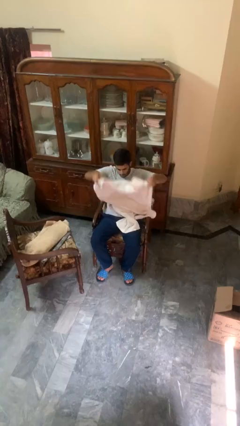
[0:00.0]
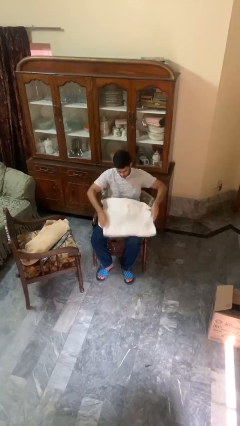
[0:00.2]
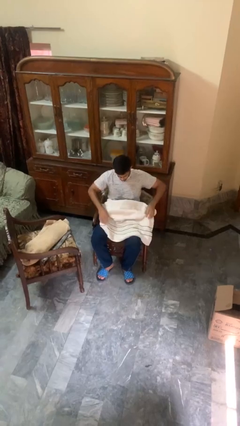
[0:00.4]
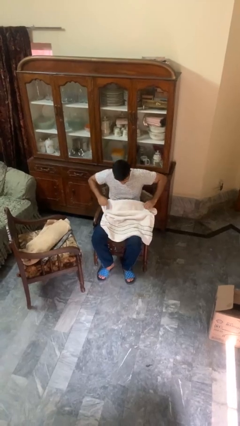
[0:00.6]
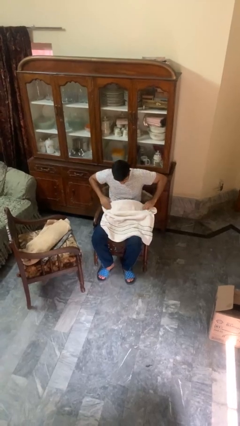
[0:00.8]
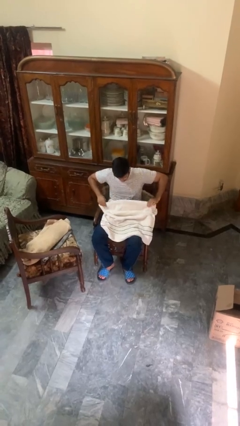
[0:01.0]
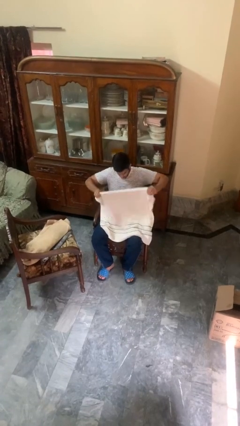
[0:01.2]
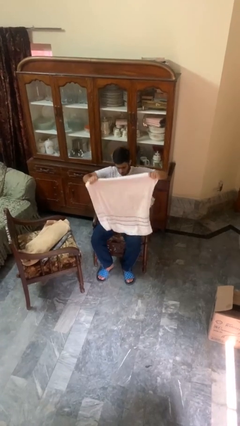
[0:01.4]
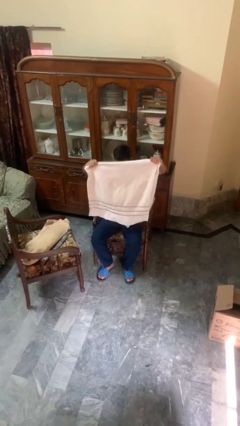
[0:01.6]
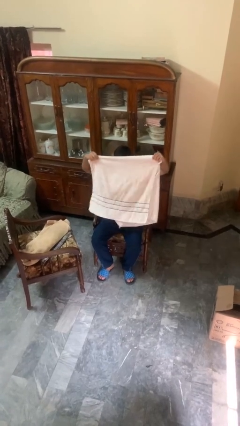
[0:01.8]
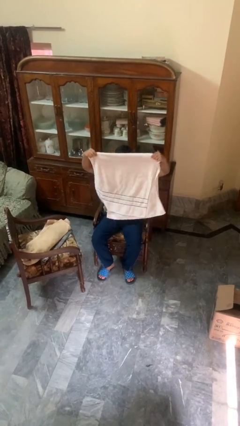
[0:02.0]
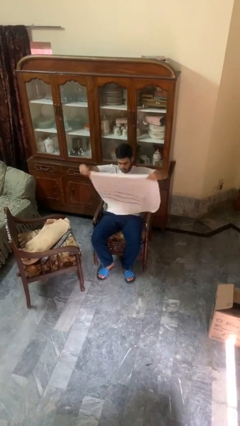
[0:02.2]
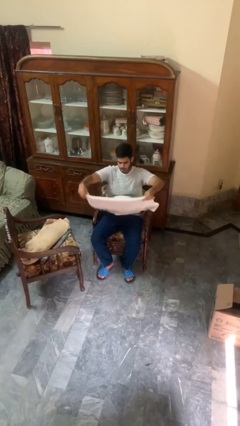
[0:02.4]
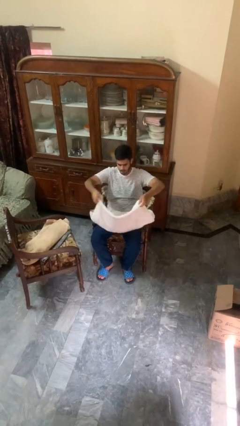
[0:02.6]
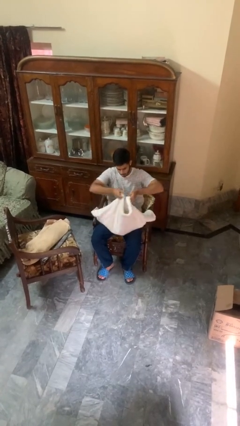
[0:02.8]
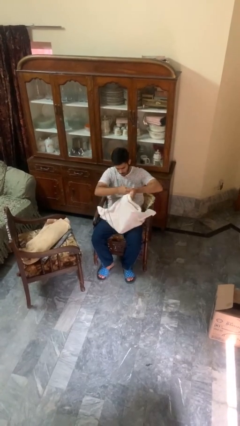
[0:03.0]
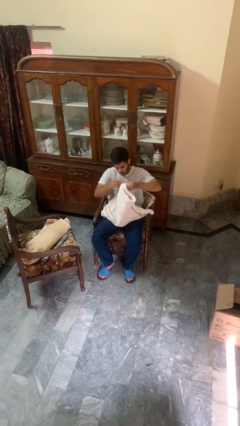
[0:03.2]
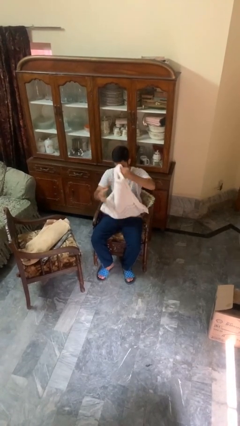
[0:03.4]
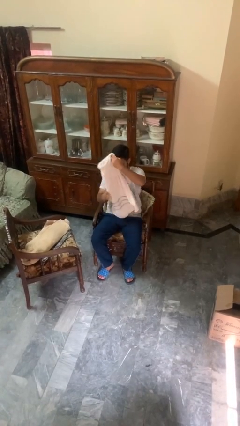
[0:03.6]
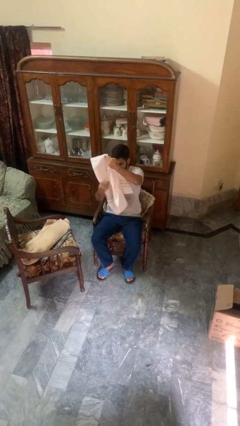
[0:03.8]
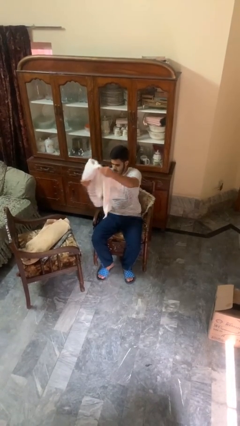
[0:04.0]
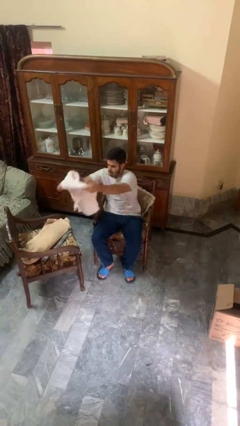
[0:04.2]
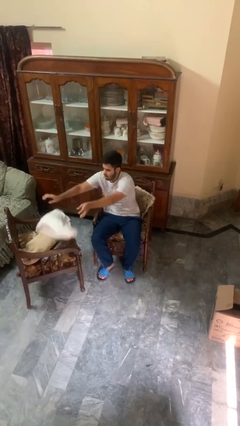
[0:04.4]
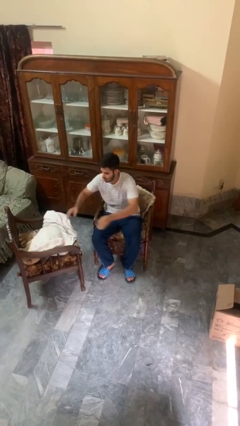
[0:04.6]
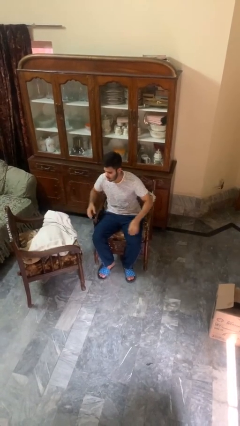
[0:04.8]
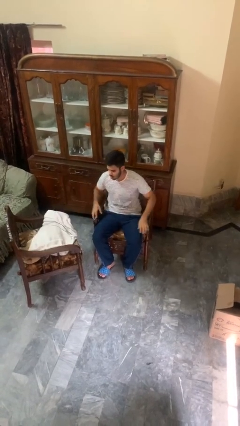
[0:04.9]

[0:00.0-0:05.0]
person folds towel

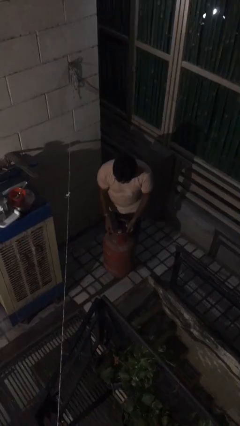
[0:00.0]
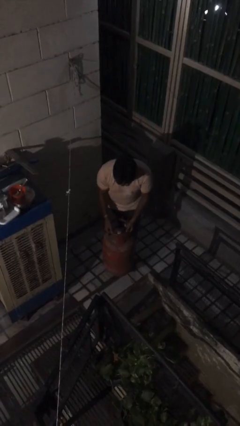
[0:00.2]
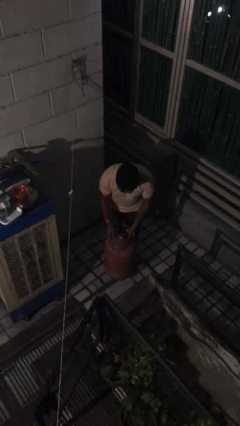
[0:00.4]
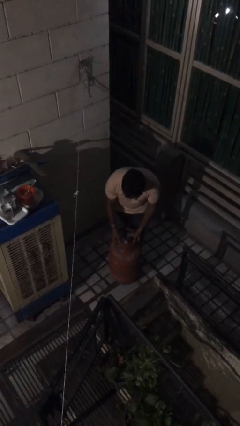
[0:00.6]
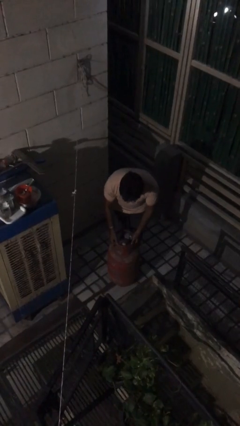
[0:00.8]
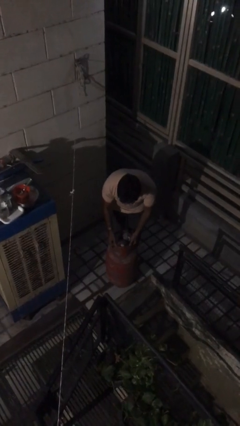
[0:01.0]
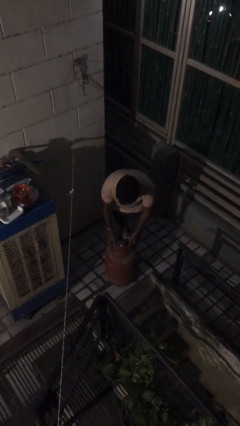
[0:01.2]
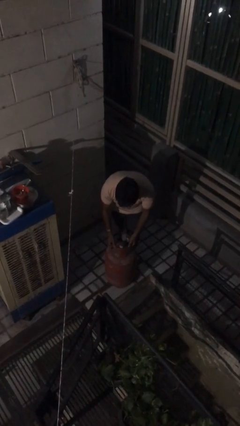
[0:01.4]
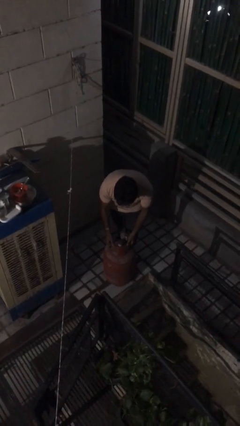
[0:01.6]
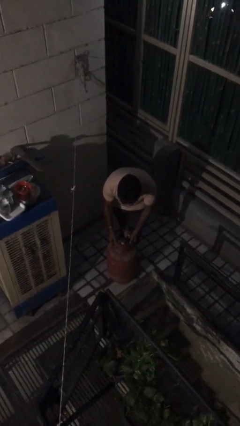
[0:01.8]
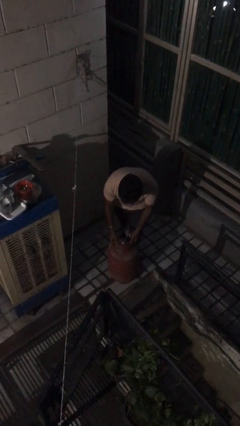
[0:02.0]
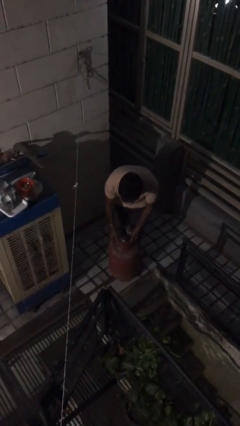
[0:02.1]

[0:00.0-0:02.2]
person puts down object on floor

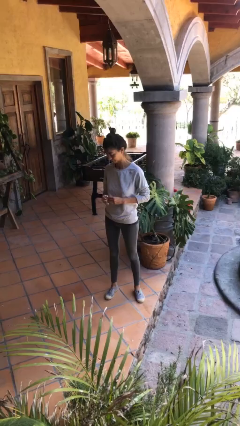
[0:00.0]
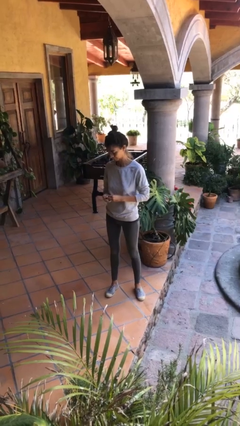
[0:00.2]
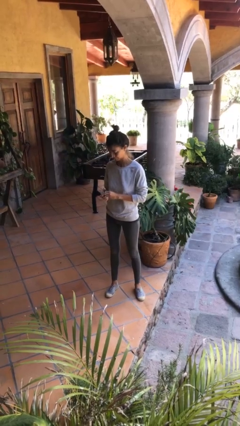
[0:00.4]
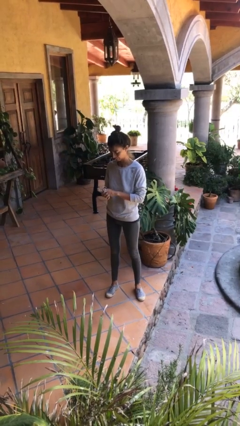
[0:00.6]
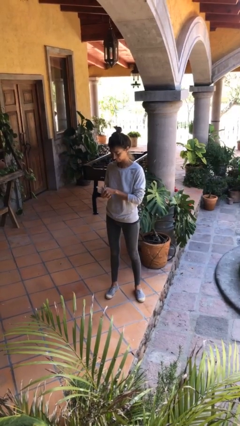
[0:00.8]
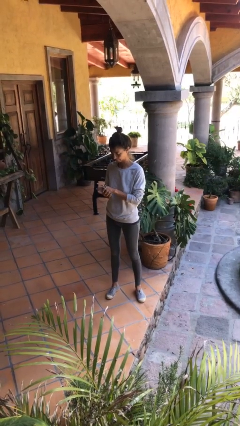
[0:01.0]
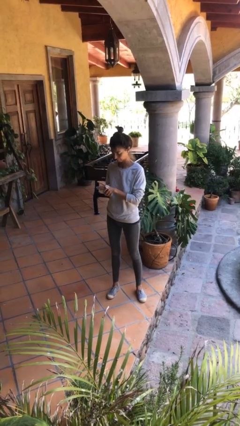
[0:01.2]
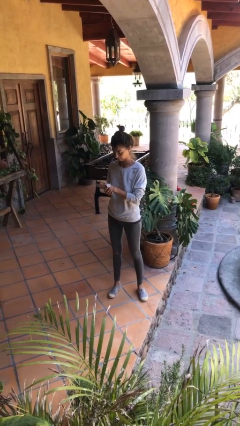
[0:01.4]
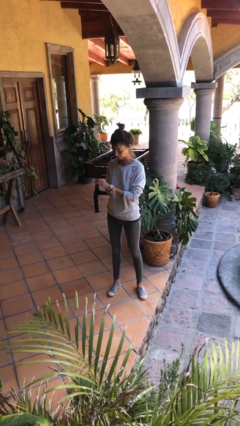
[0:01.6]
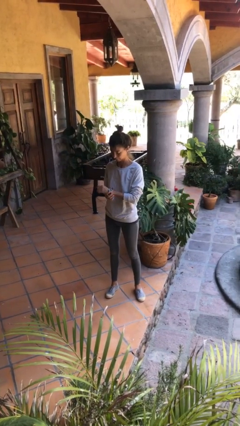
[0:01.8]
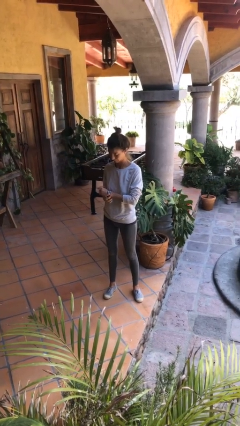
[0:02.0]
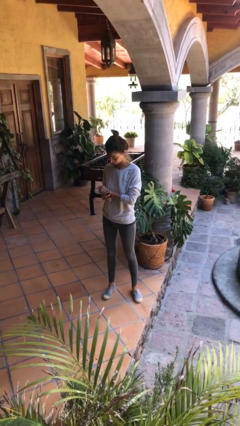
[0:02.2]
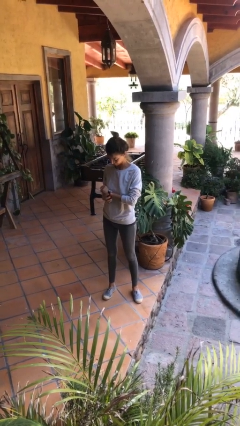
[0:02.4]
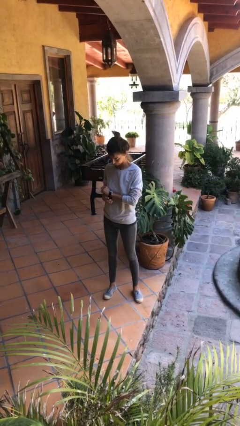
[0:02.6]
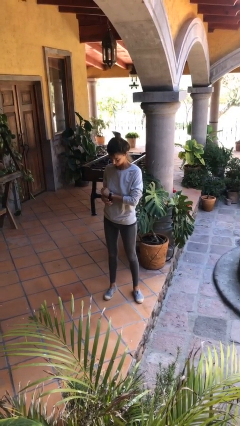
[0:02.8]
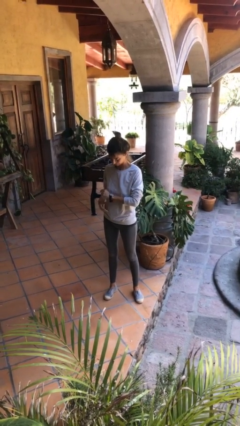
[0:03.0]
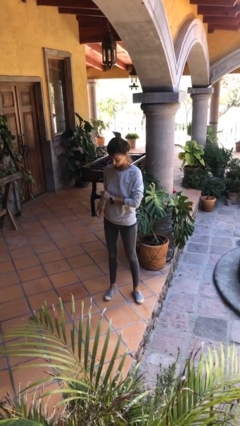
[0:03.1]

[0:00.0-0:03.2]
person puts on wristwatch

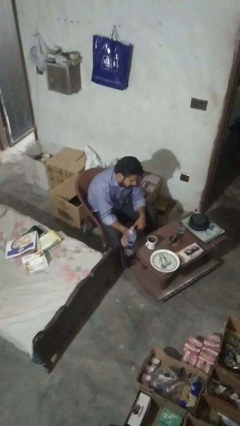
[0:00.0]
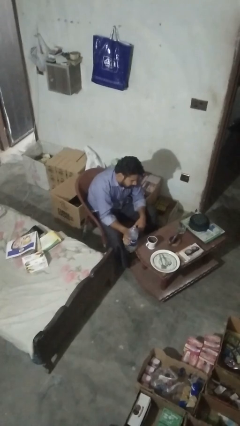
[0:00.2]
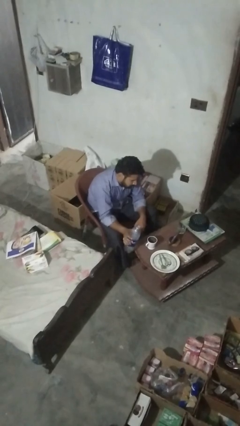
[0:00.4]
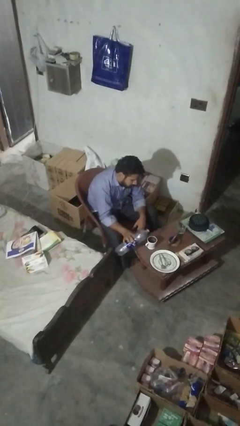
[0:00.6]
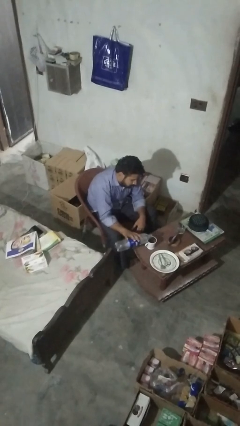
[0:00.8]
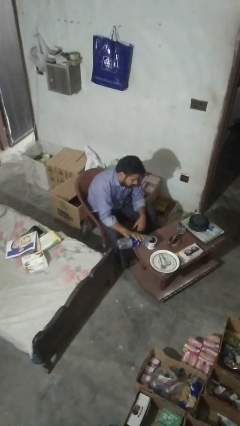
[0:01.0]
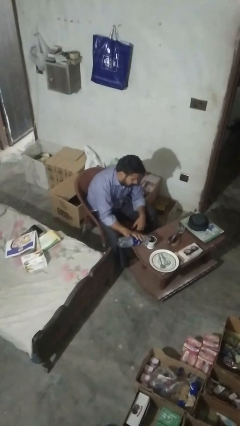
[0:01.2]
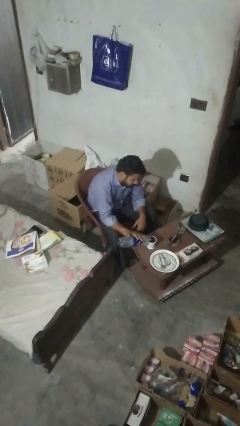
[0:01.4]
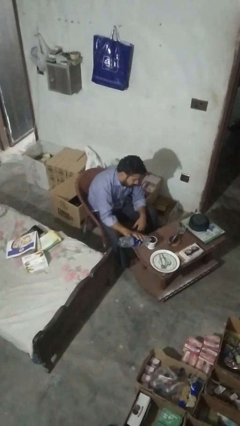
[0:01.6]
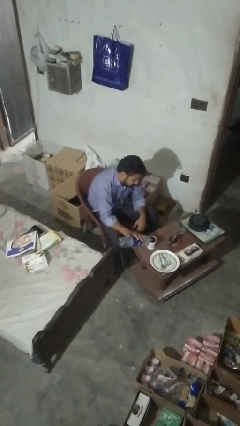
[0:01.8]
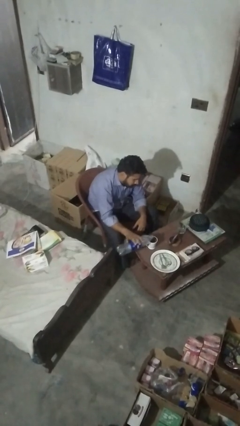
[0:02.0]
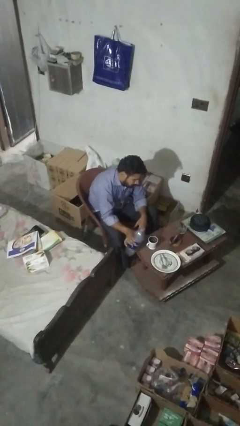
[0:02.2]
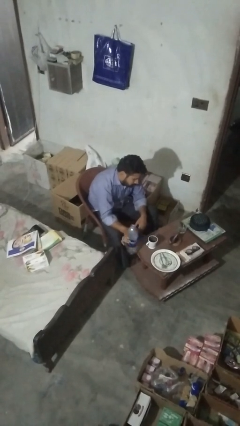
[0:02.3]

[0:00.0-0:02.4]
person pours liquid into cup

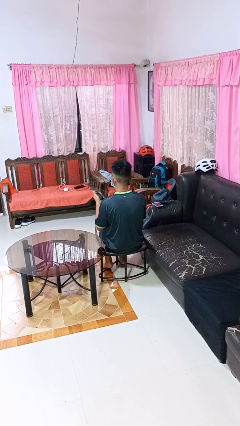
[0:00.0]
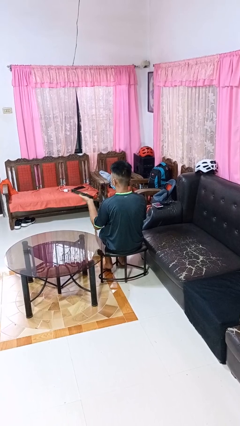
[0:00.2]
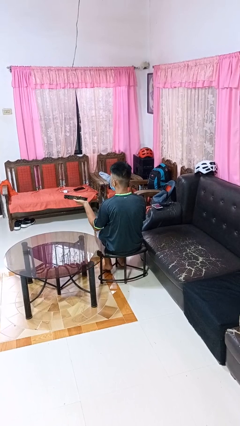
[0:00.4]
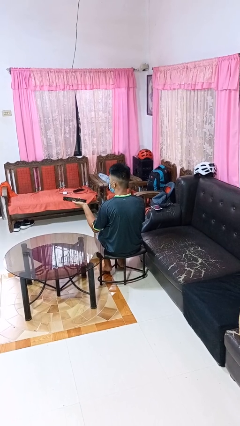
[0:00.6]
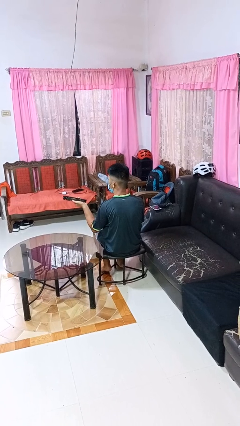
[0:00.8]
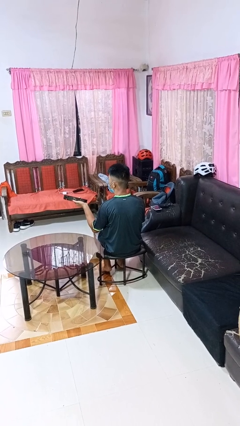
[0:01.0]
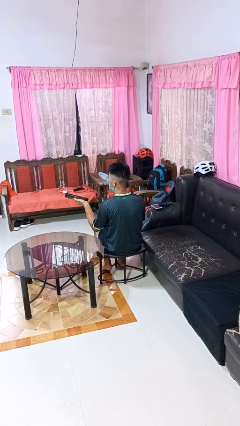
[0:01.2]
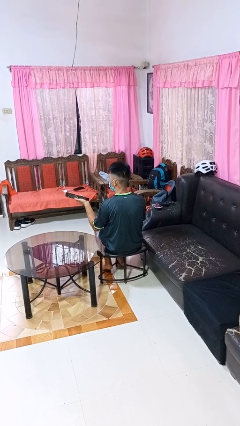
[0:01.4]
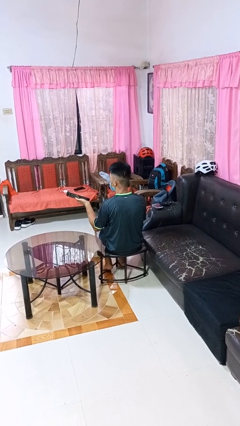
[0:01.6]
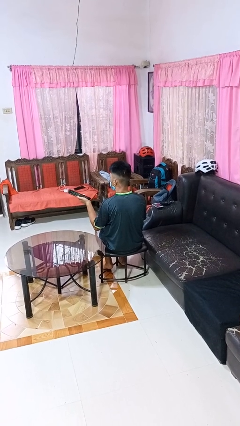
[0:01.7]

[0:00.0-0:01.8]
person uses television remote

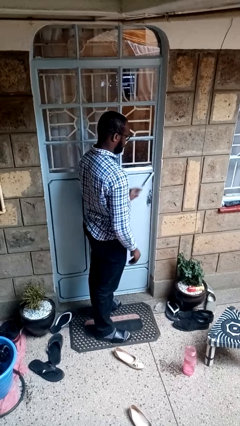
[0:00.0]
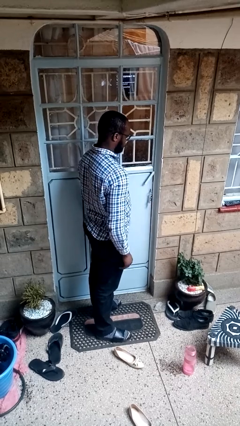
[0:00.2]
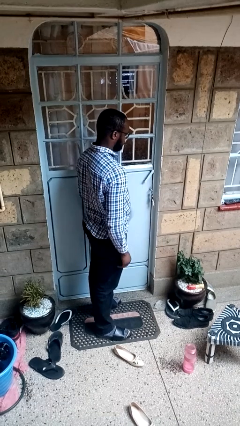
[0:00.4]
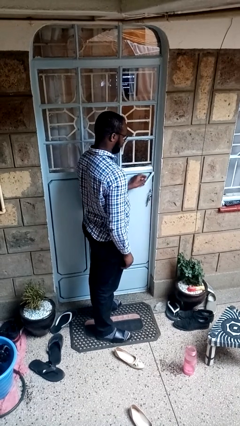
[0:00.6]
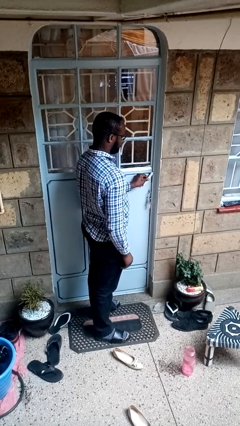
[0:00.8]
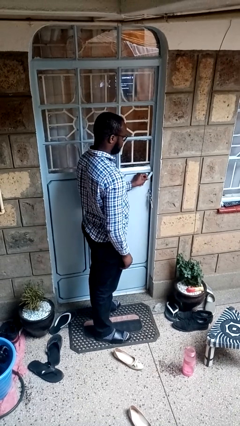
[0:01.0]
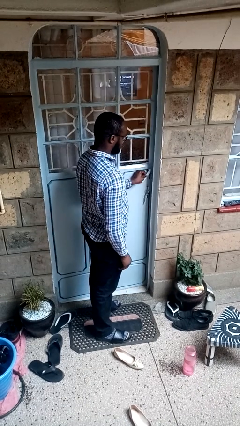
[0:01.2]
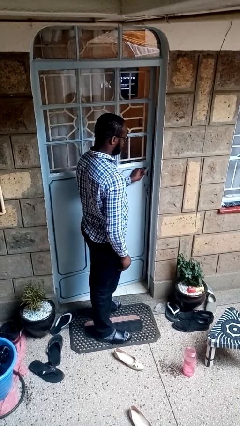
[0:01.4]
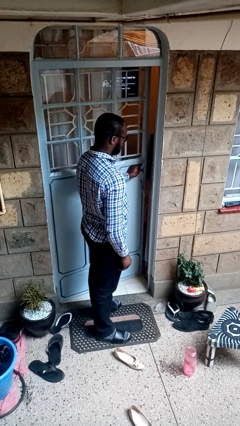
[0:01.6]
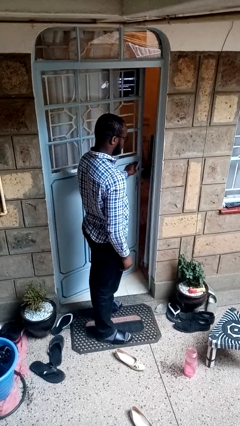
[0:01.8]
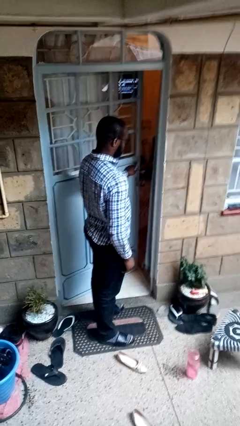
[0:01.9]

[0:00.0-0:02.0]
person opens facility door

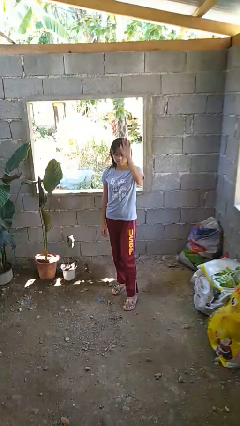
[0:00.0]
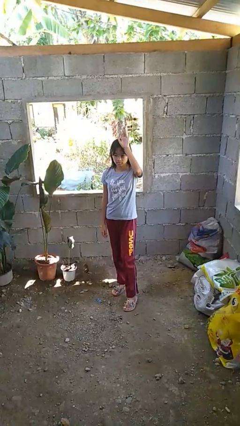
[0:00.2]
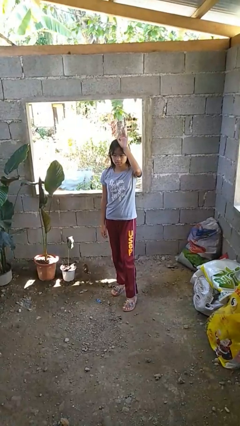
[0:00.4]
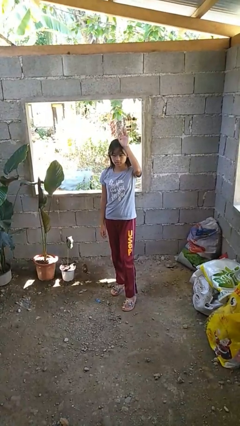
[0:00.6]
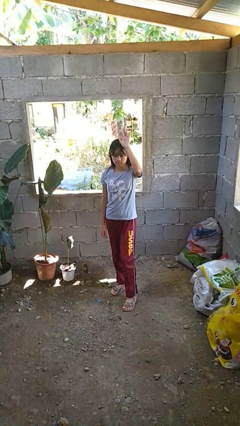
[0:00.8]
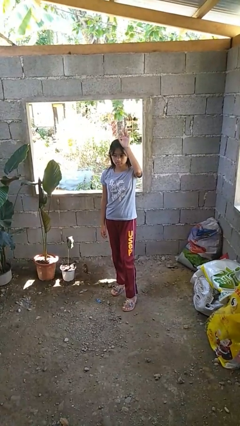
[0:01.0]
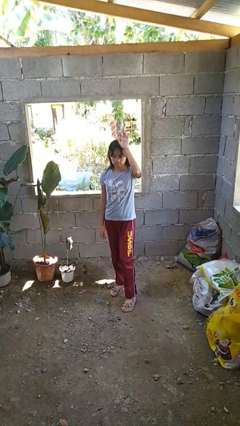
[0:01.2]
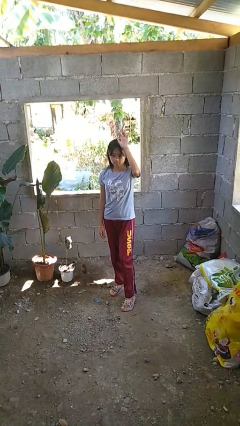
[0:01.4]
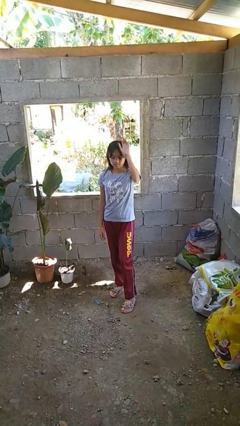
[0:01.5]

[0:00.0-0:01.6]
person gestures raise hand
